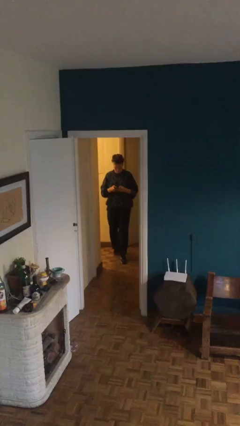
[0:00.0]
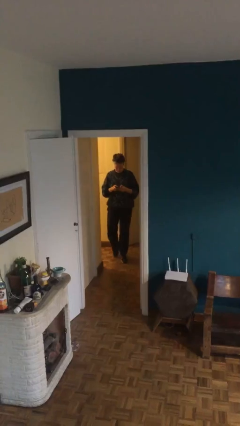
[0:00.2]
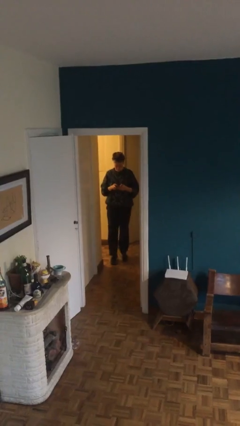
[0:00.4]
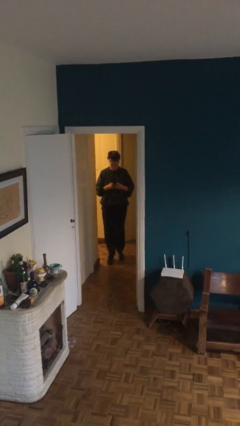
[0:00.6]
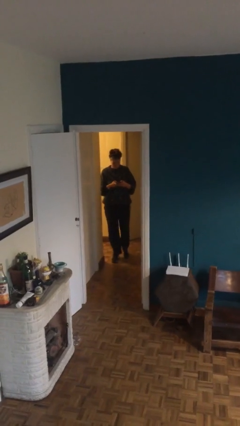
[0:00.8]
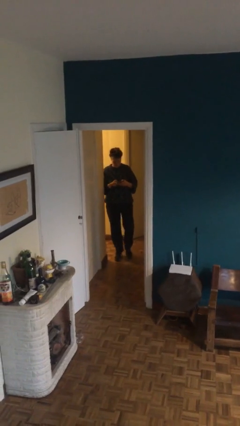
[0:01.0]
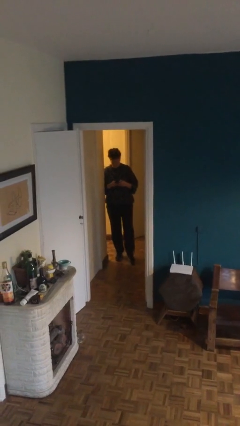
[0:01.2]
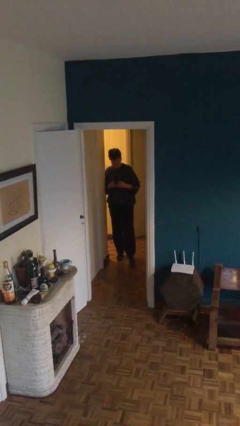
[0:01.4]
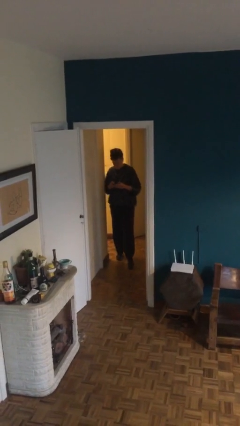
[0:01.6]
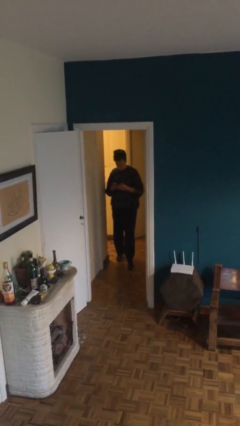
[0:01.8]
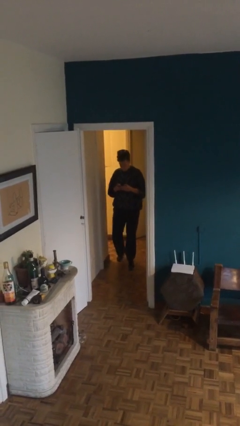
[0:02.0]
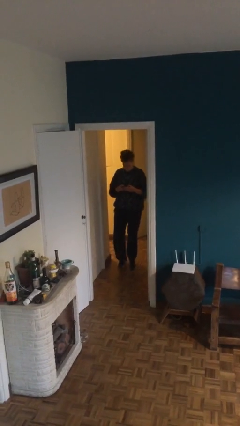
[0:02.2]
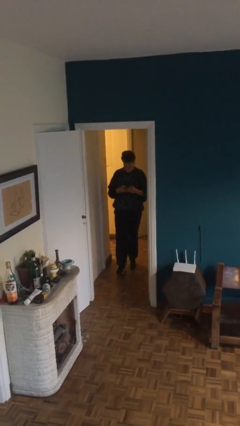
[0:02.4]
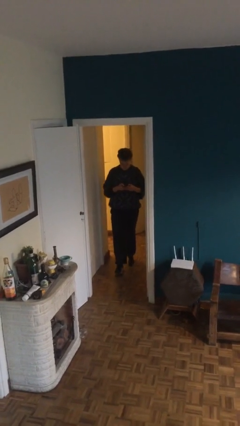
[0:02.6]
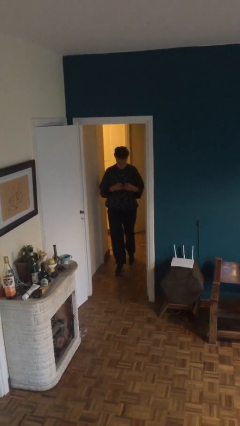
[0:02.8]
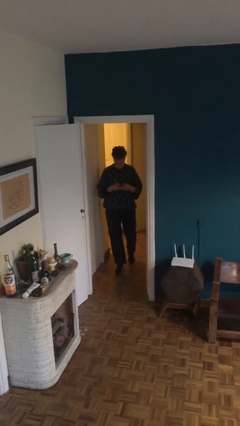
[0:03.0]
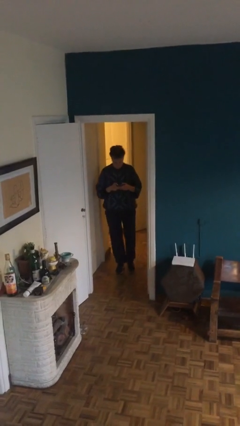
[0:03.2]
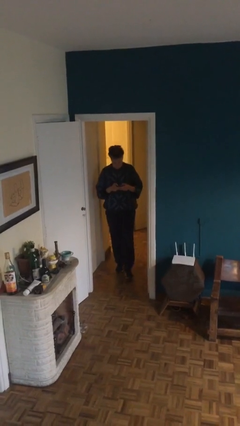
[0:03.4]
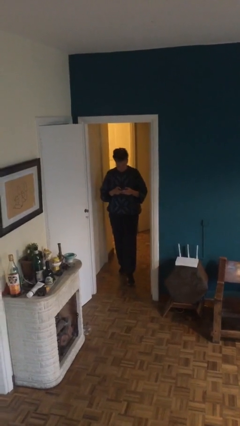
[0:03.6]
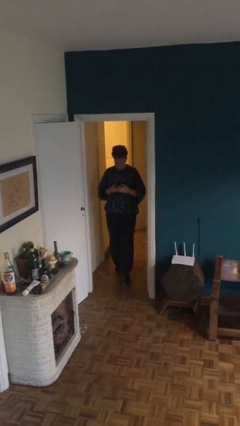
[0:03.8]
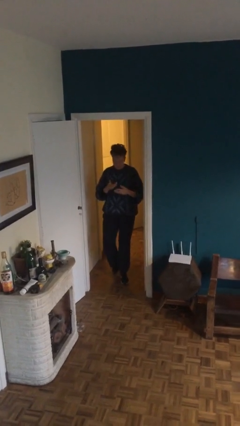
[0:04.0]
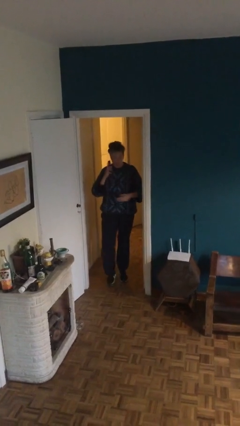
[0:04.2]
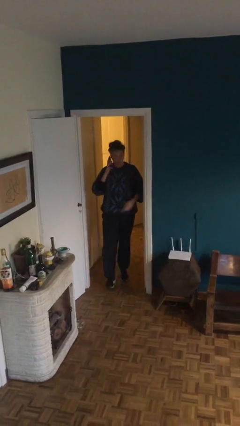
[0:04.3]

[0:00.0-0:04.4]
person texts on phone

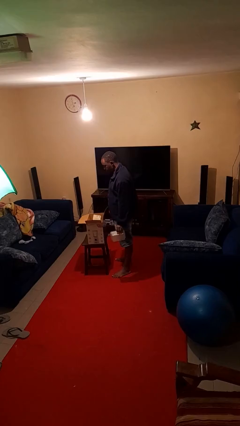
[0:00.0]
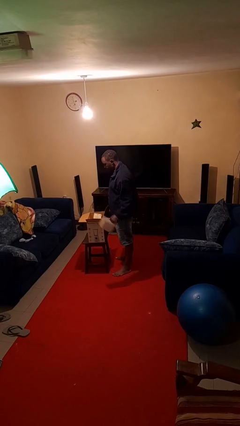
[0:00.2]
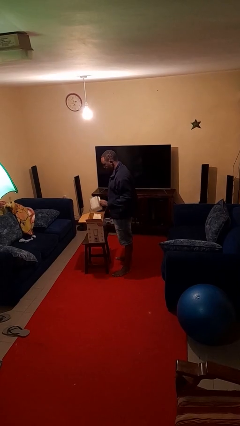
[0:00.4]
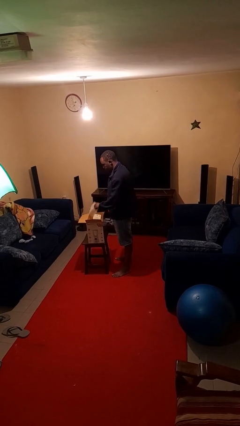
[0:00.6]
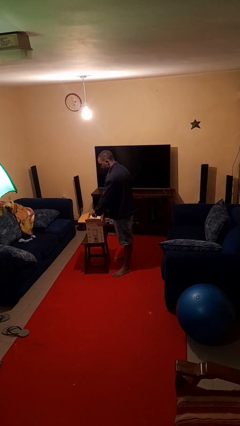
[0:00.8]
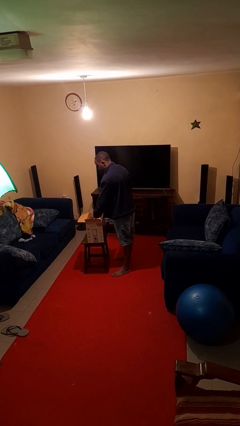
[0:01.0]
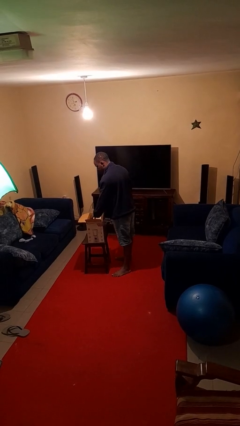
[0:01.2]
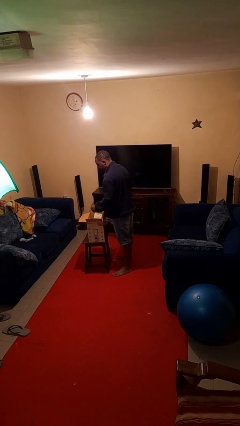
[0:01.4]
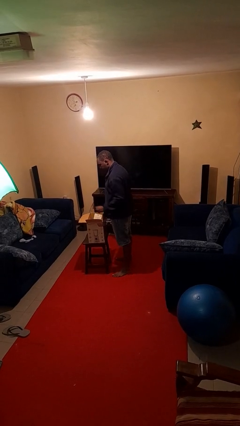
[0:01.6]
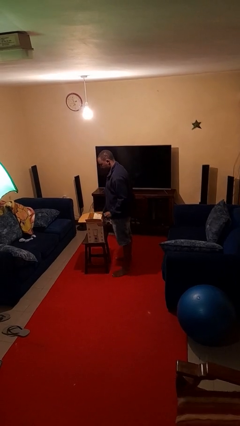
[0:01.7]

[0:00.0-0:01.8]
person puts object into box

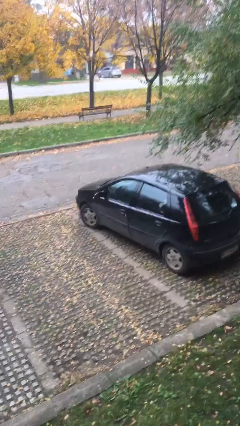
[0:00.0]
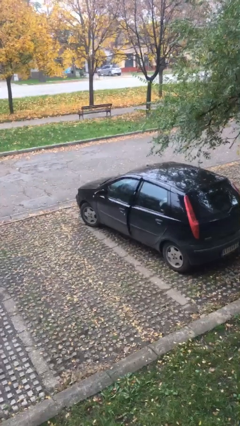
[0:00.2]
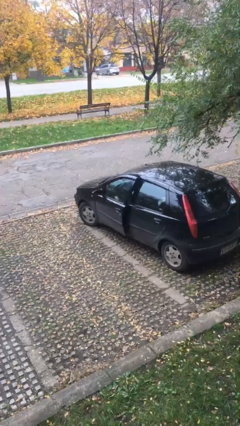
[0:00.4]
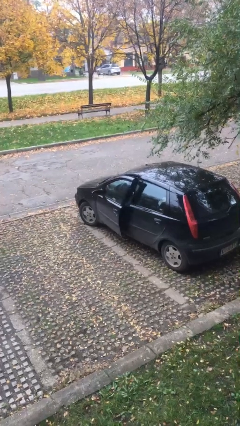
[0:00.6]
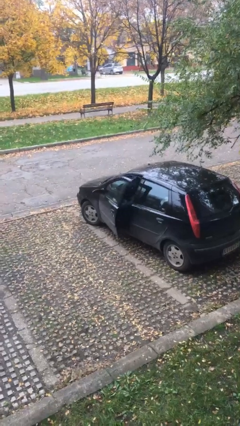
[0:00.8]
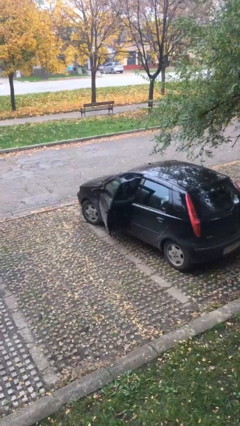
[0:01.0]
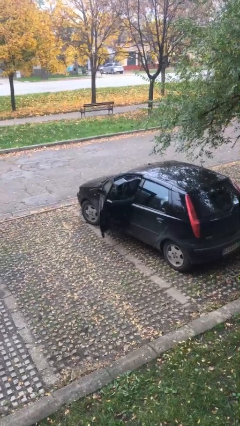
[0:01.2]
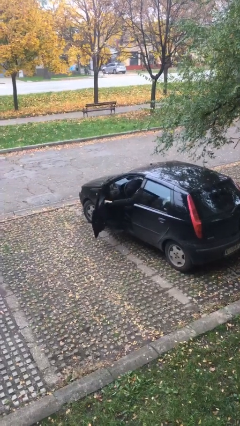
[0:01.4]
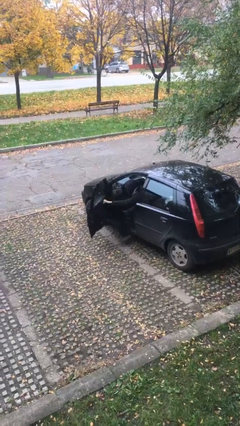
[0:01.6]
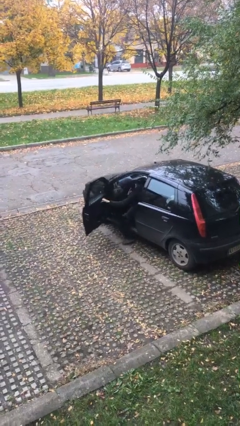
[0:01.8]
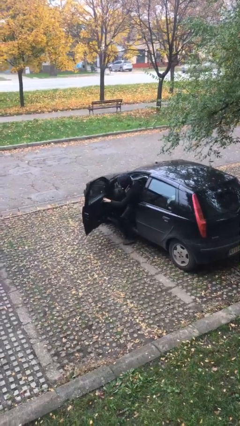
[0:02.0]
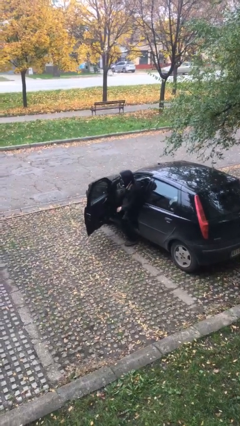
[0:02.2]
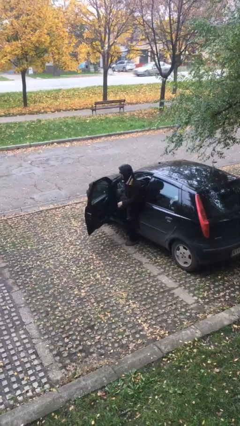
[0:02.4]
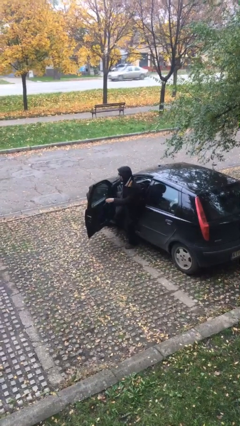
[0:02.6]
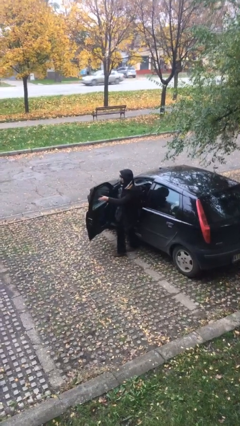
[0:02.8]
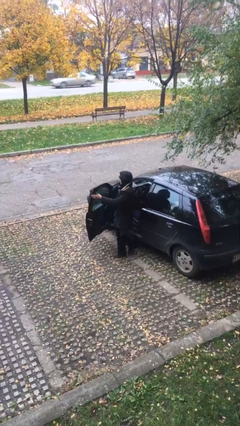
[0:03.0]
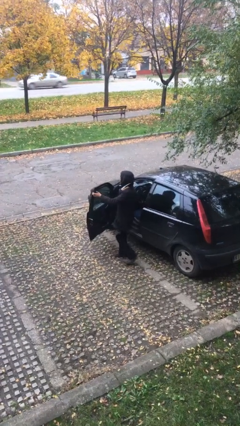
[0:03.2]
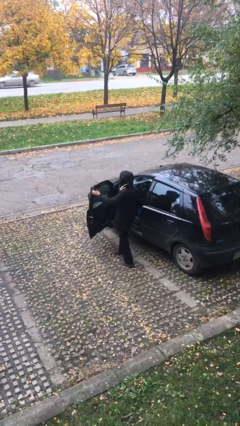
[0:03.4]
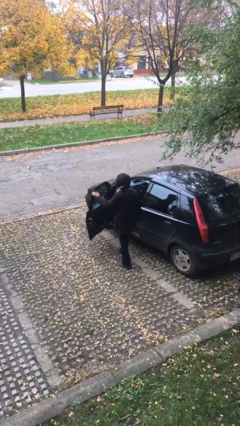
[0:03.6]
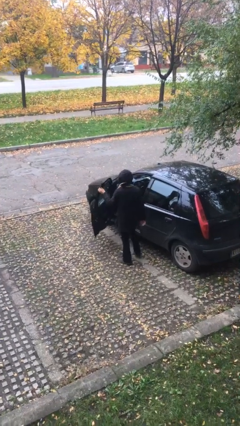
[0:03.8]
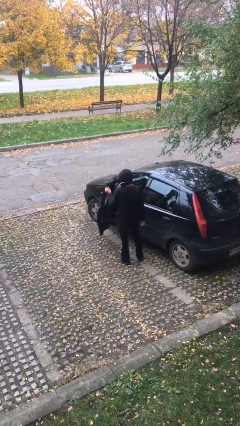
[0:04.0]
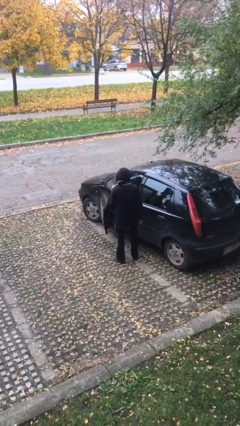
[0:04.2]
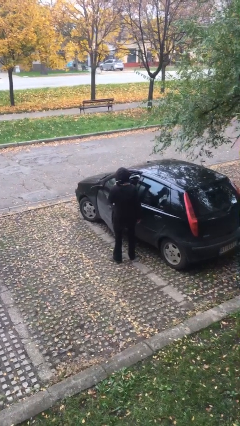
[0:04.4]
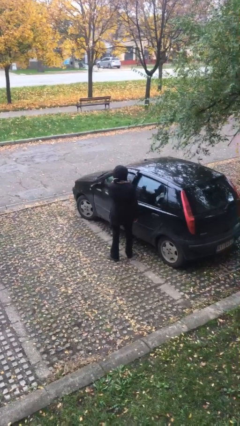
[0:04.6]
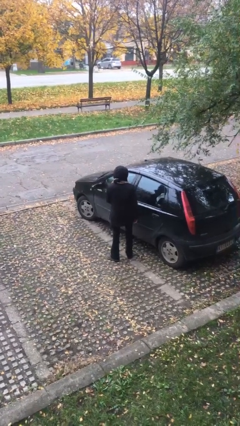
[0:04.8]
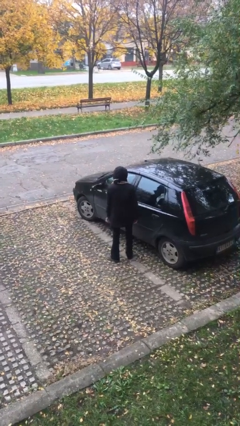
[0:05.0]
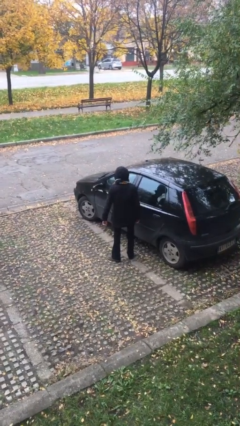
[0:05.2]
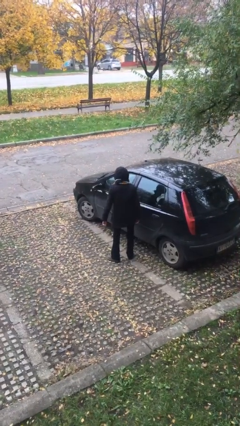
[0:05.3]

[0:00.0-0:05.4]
person exits car

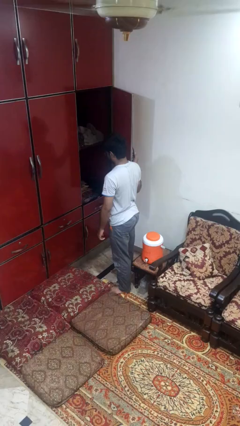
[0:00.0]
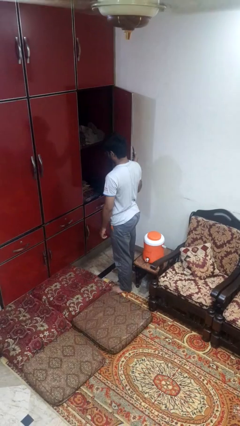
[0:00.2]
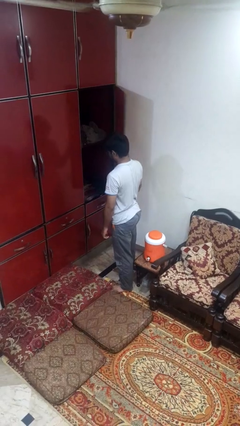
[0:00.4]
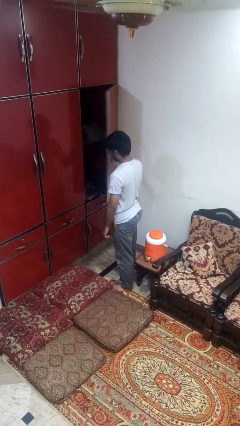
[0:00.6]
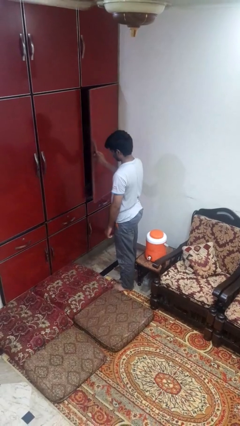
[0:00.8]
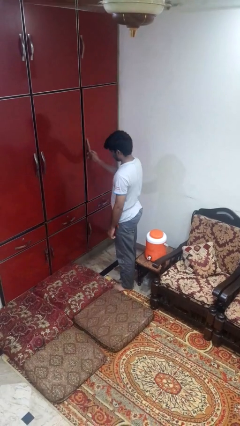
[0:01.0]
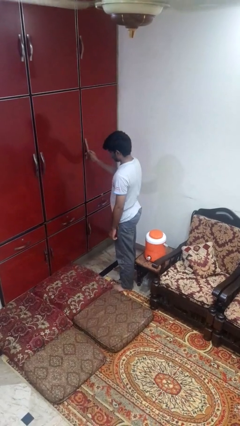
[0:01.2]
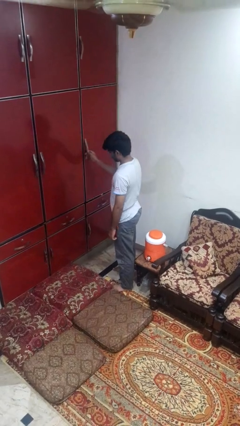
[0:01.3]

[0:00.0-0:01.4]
person closes cabinet

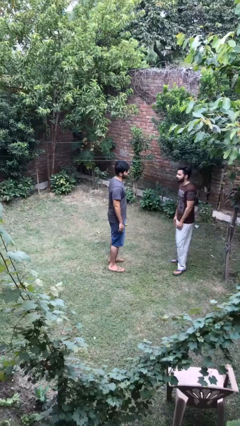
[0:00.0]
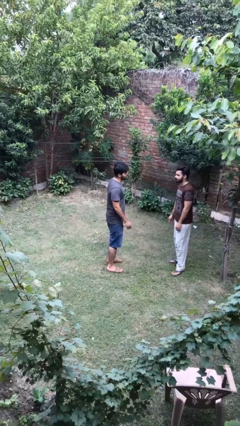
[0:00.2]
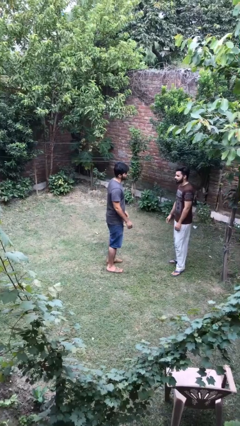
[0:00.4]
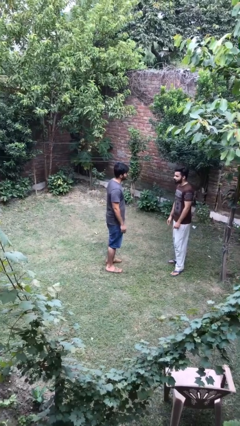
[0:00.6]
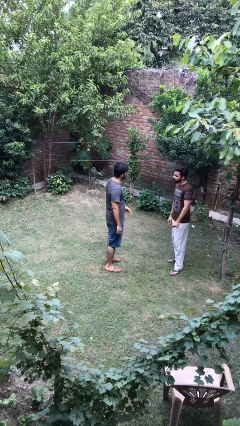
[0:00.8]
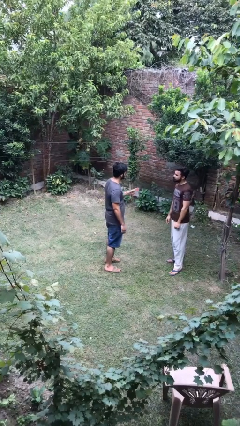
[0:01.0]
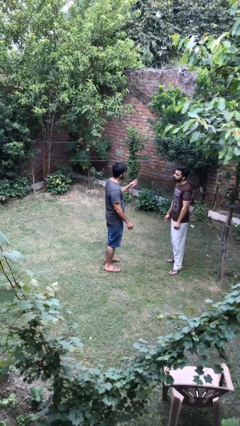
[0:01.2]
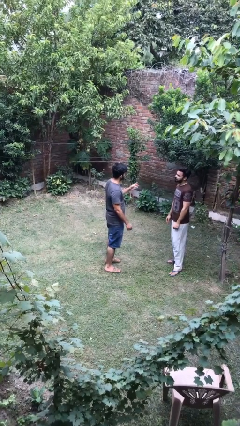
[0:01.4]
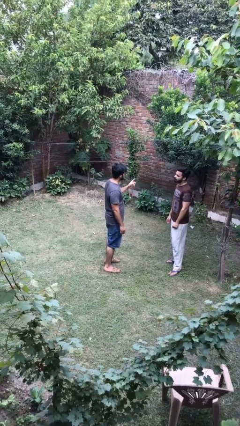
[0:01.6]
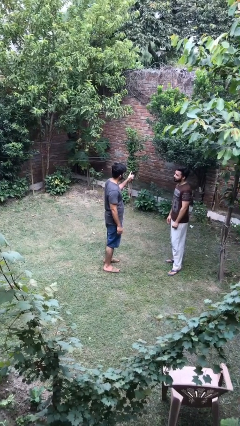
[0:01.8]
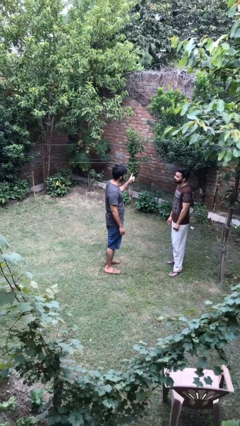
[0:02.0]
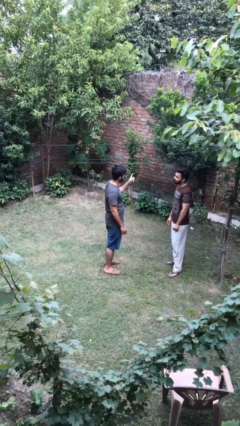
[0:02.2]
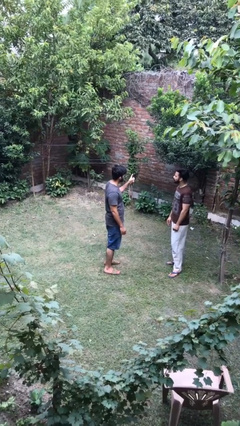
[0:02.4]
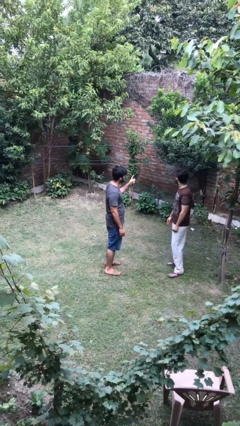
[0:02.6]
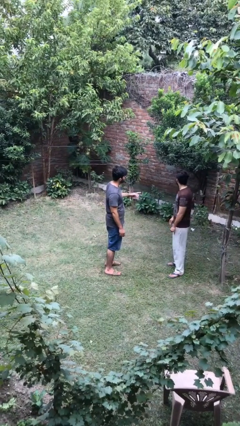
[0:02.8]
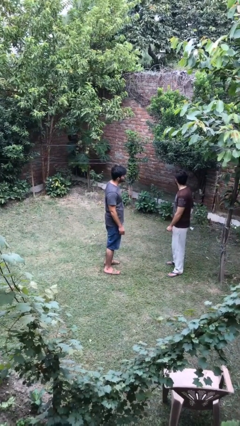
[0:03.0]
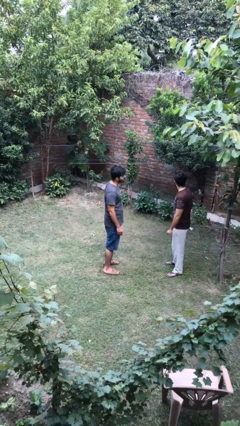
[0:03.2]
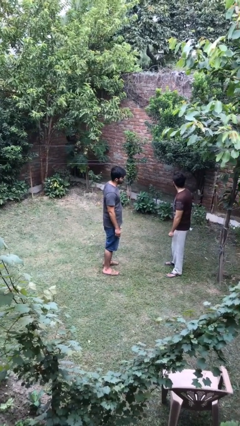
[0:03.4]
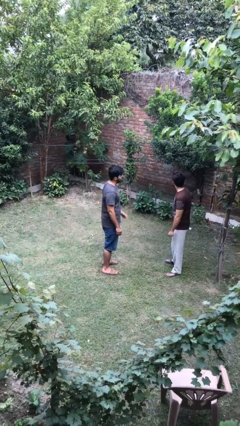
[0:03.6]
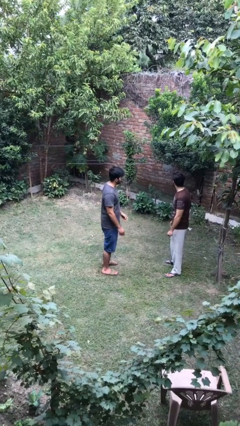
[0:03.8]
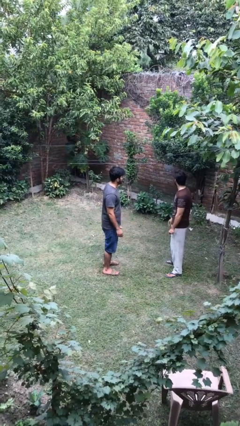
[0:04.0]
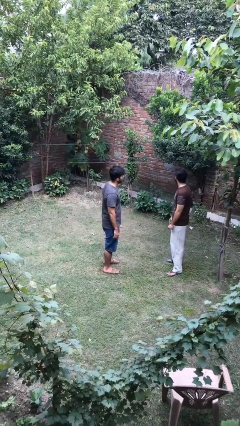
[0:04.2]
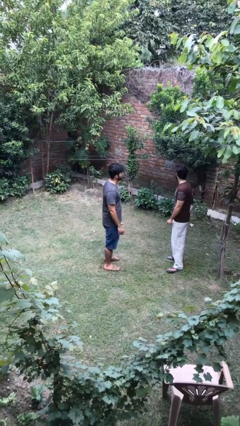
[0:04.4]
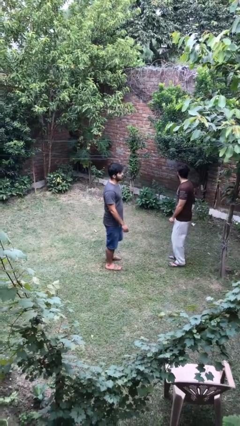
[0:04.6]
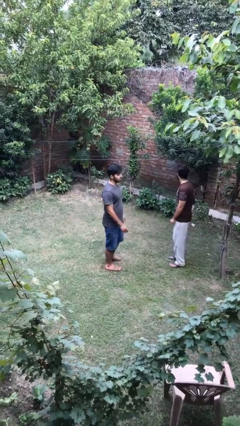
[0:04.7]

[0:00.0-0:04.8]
person talks to person
